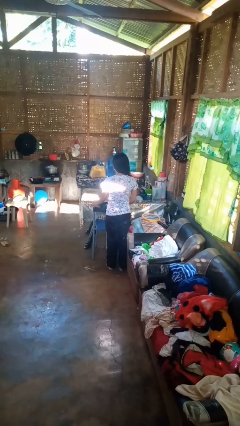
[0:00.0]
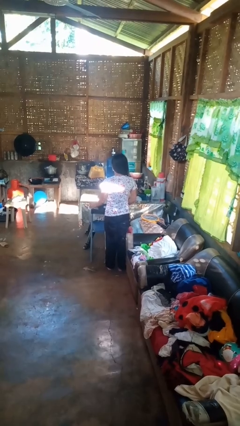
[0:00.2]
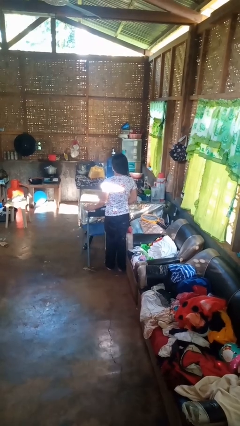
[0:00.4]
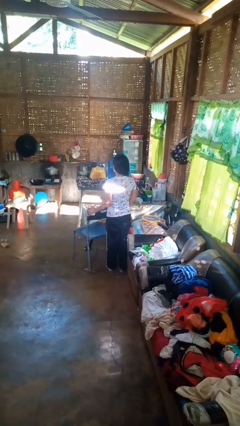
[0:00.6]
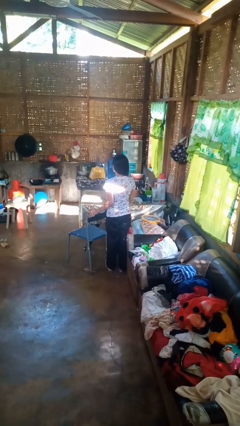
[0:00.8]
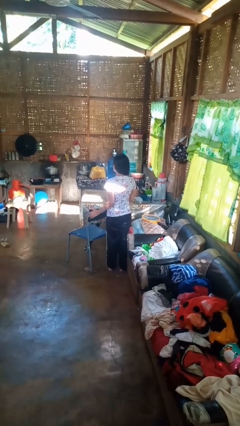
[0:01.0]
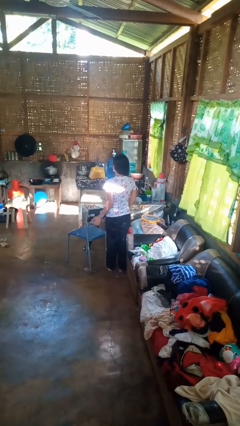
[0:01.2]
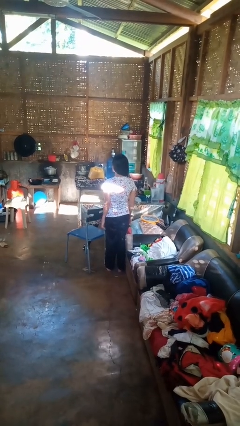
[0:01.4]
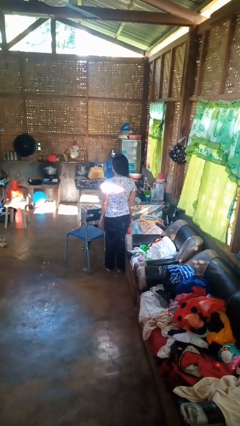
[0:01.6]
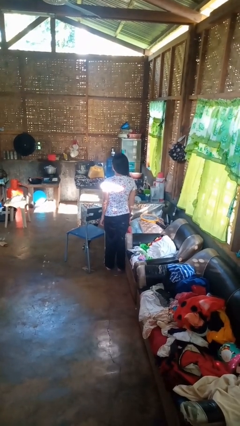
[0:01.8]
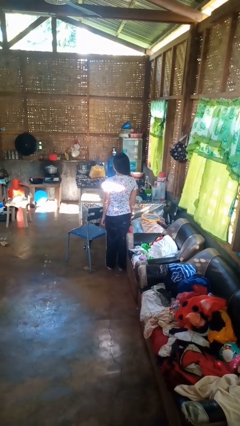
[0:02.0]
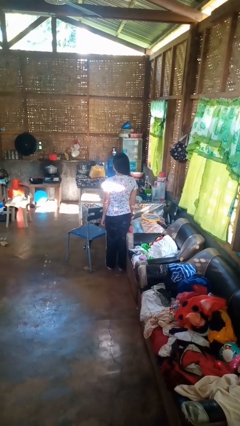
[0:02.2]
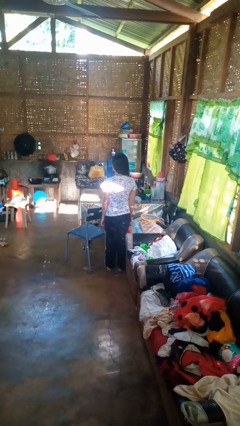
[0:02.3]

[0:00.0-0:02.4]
person pulls out chair

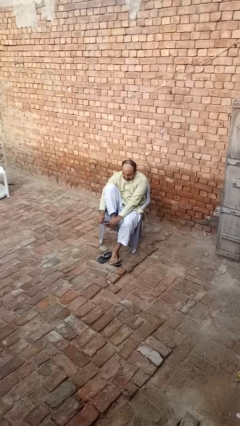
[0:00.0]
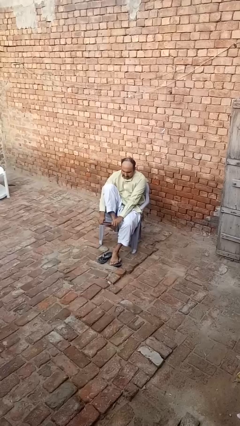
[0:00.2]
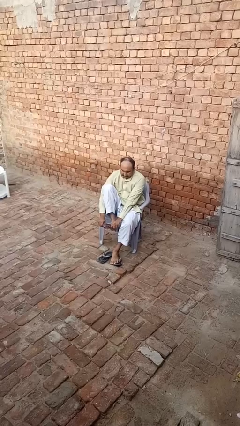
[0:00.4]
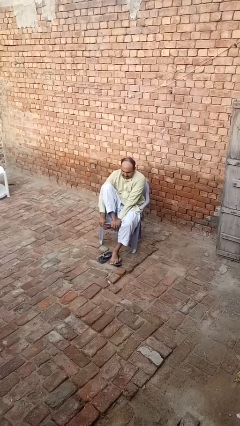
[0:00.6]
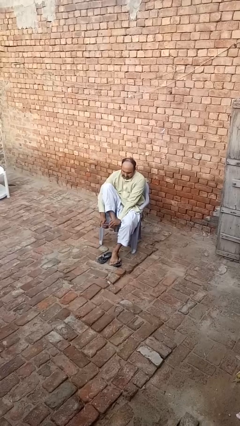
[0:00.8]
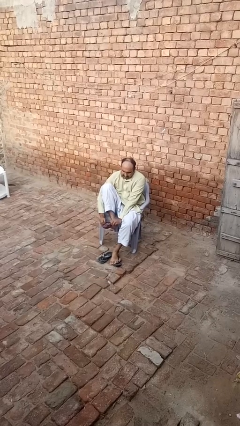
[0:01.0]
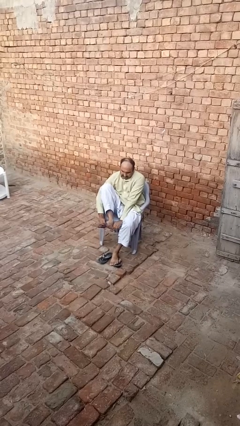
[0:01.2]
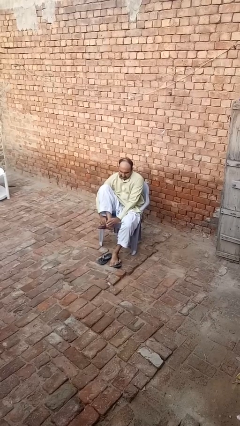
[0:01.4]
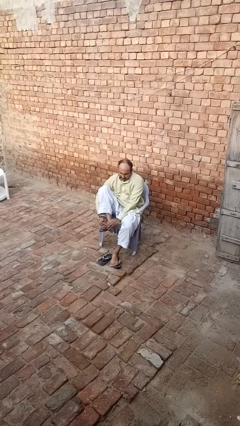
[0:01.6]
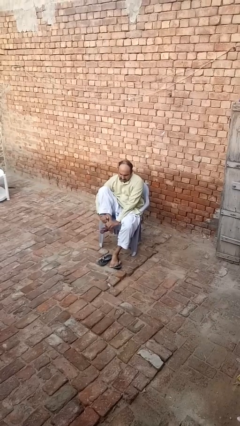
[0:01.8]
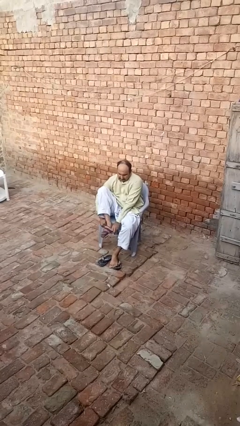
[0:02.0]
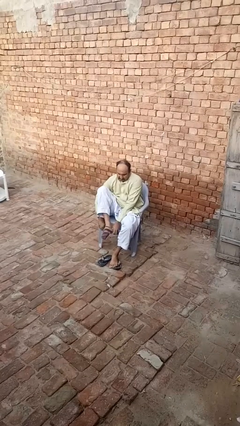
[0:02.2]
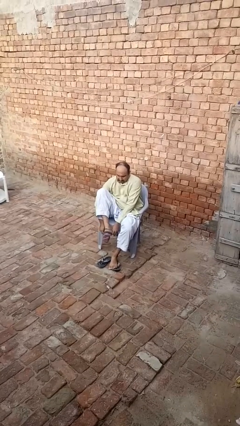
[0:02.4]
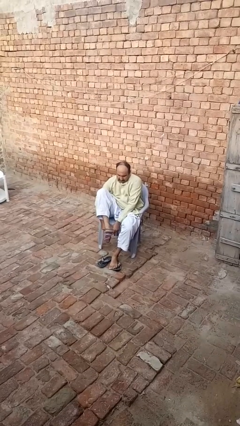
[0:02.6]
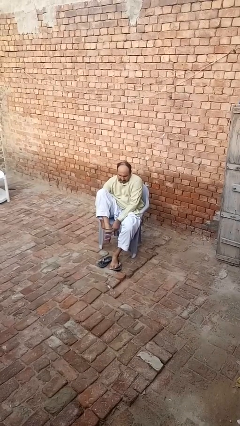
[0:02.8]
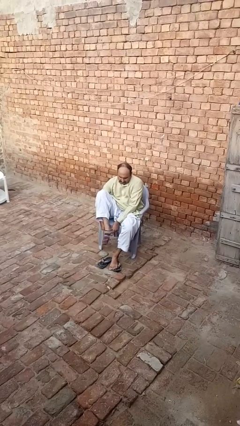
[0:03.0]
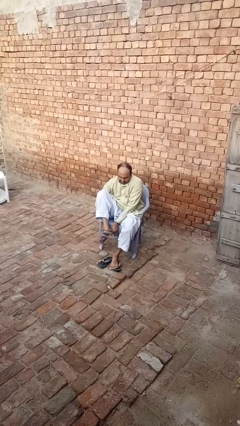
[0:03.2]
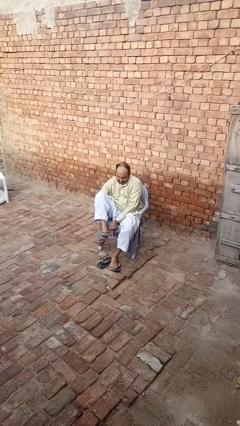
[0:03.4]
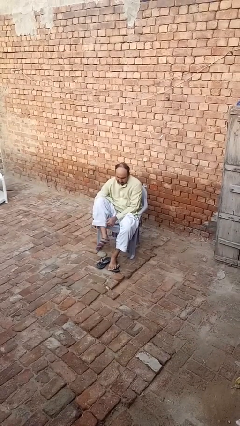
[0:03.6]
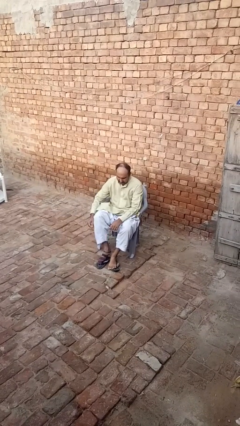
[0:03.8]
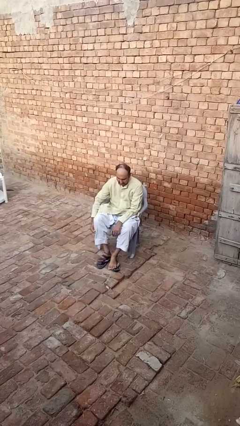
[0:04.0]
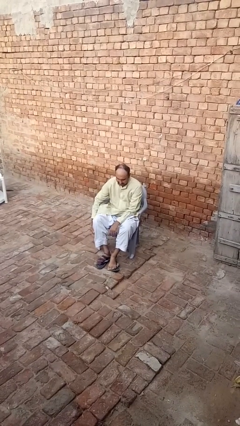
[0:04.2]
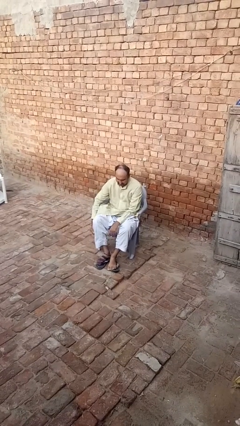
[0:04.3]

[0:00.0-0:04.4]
person puts on socks

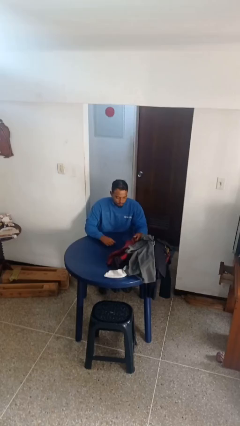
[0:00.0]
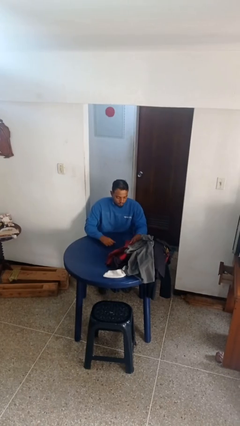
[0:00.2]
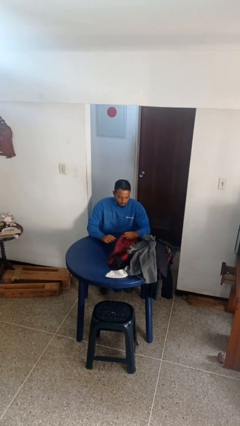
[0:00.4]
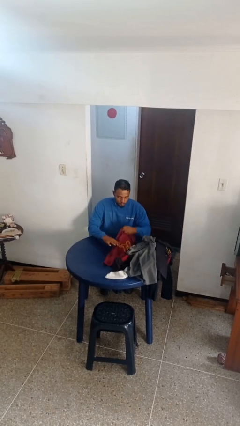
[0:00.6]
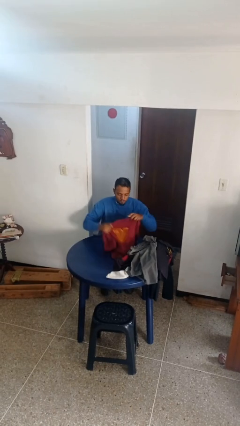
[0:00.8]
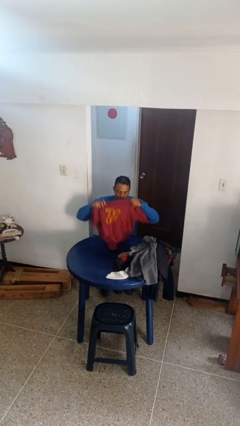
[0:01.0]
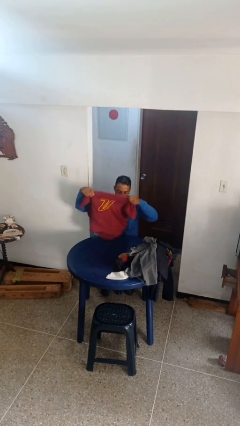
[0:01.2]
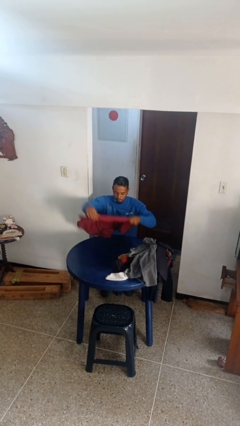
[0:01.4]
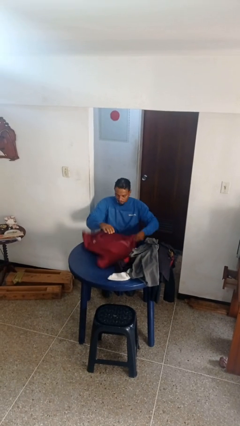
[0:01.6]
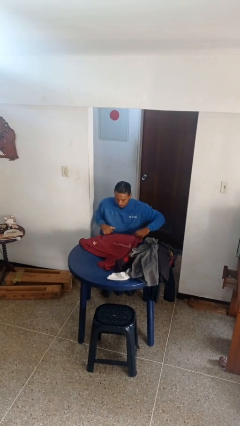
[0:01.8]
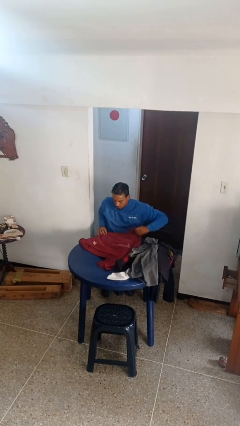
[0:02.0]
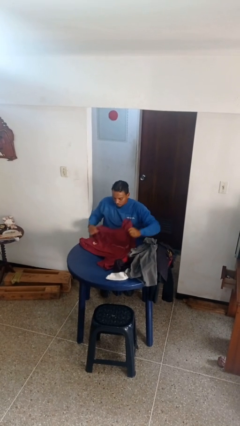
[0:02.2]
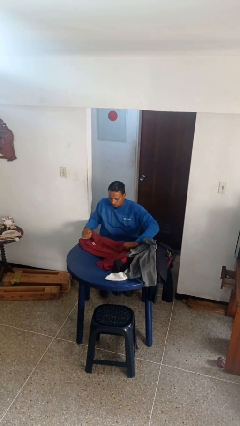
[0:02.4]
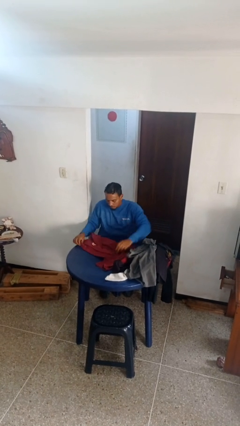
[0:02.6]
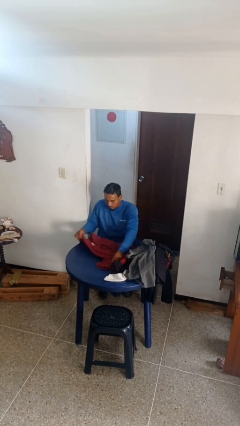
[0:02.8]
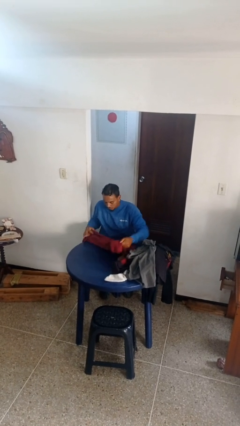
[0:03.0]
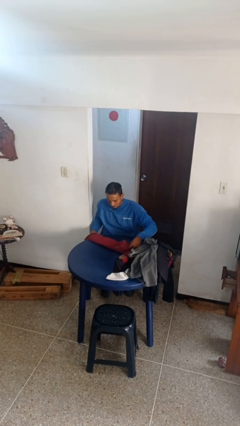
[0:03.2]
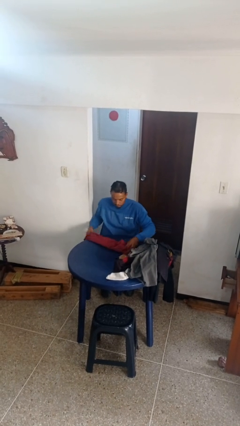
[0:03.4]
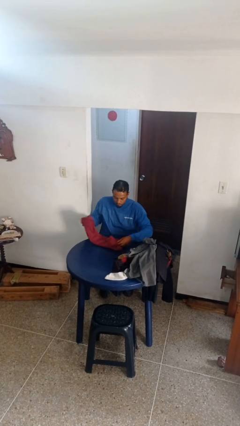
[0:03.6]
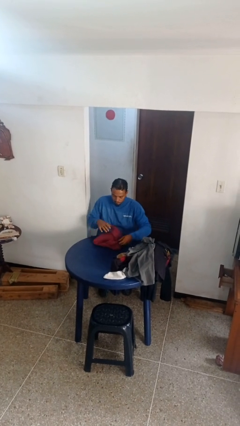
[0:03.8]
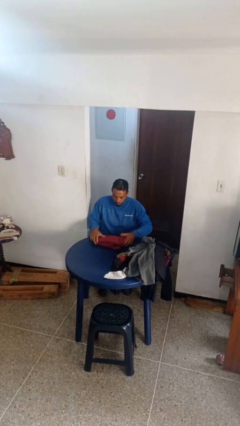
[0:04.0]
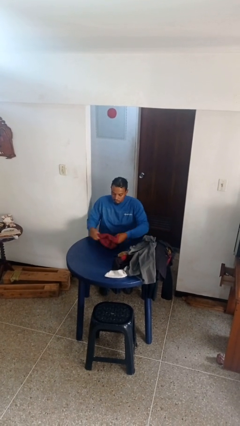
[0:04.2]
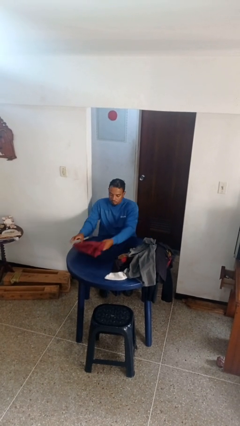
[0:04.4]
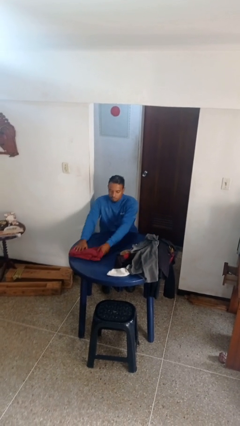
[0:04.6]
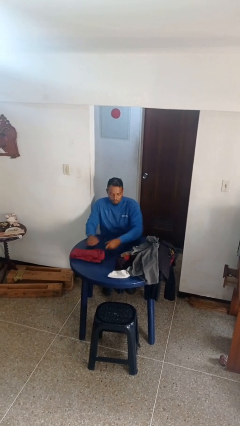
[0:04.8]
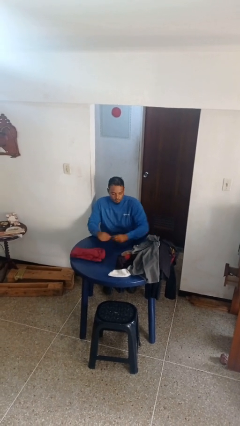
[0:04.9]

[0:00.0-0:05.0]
person folds shirt

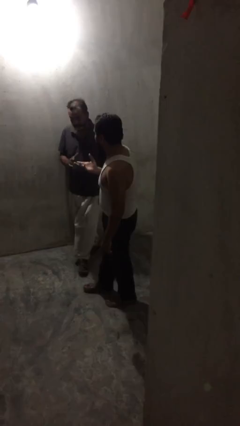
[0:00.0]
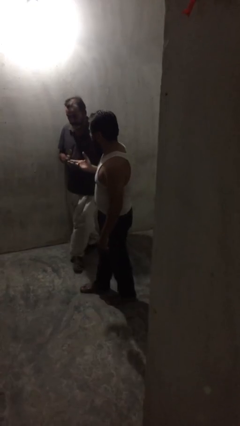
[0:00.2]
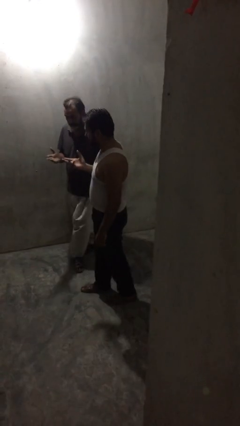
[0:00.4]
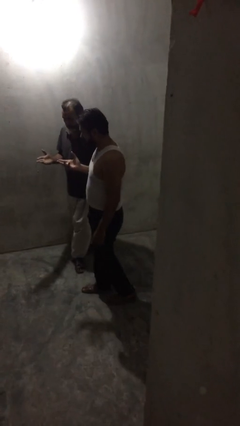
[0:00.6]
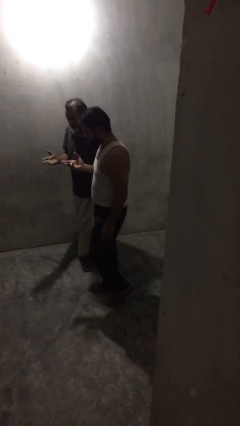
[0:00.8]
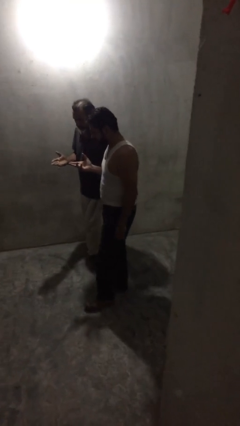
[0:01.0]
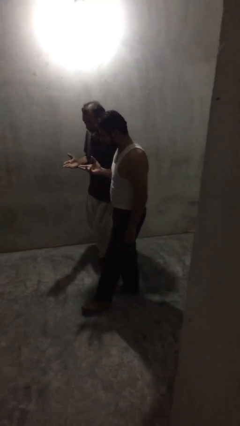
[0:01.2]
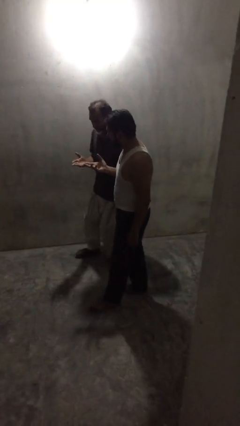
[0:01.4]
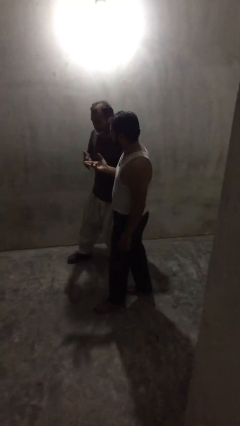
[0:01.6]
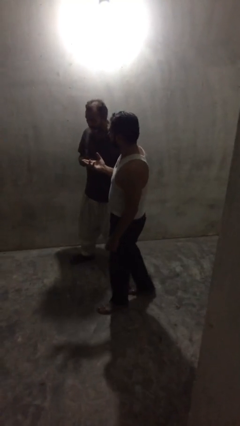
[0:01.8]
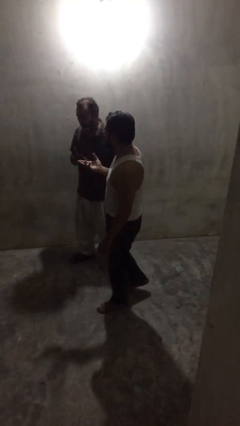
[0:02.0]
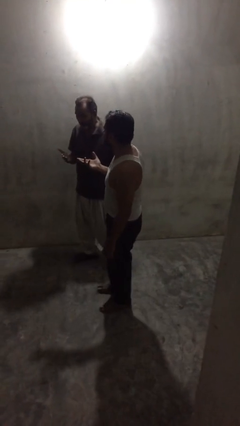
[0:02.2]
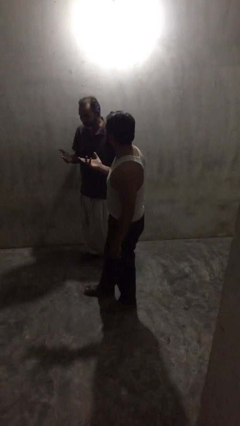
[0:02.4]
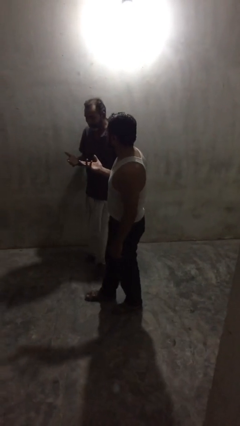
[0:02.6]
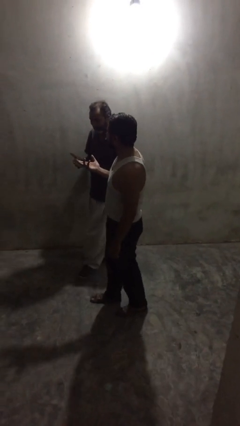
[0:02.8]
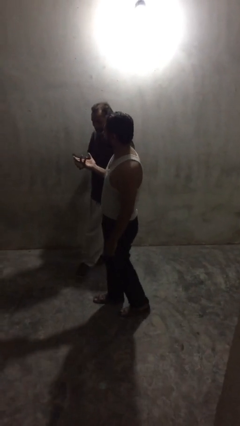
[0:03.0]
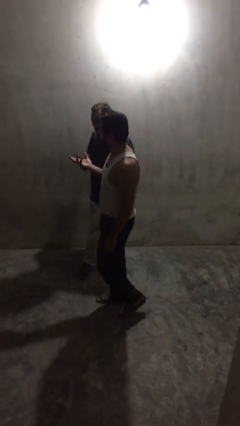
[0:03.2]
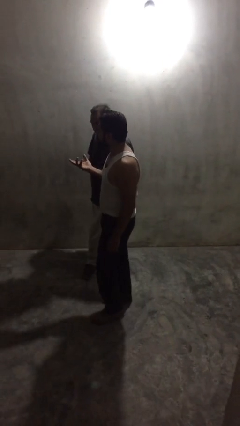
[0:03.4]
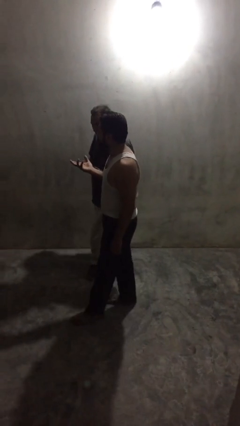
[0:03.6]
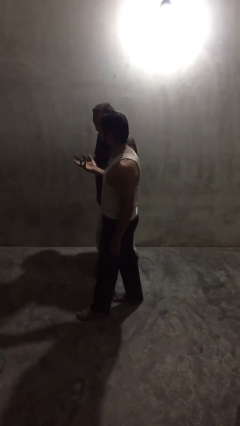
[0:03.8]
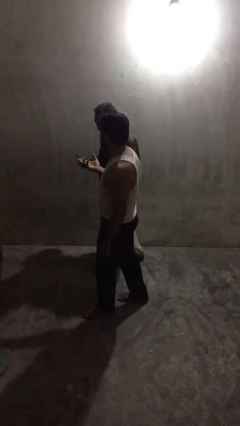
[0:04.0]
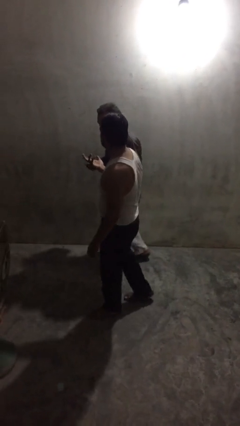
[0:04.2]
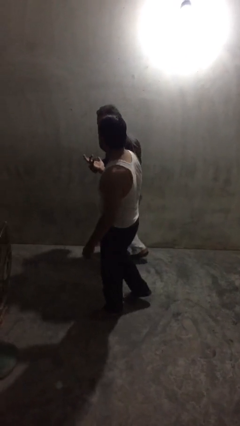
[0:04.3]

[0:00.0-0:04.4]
person talks to person

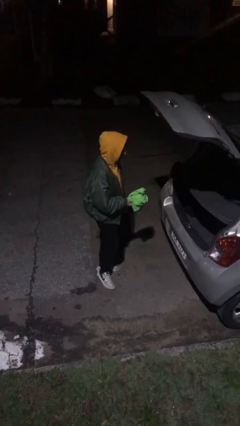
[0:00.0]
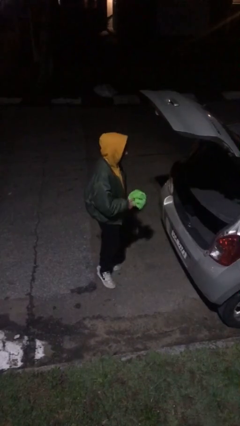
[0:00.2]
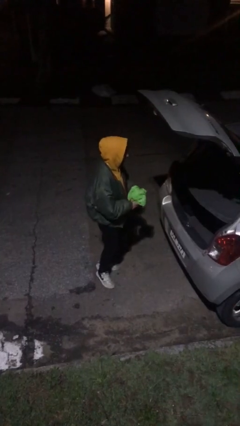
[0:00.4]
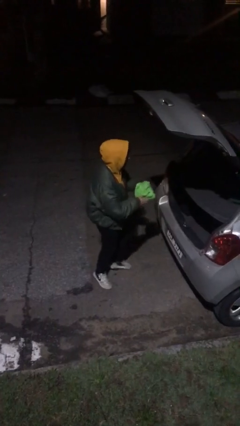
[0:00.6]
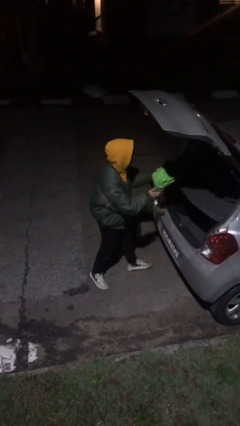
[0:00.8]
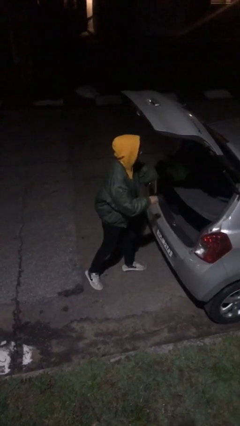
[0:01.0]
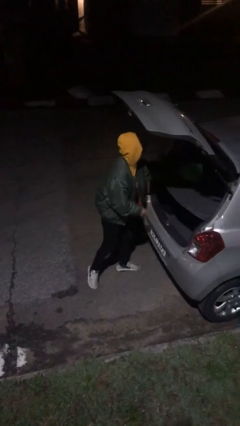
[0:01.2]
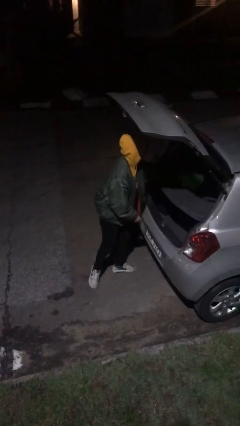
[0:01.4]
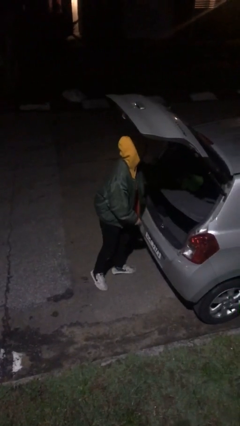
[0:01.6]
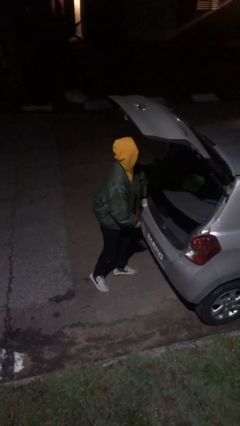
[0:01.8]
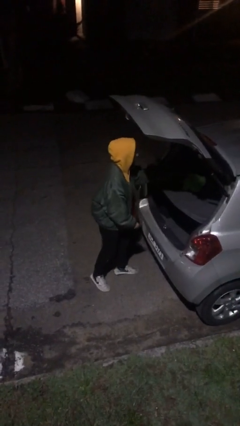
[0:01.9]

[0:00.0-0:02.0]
person loads car
